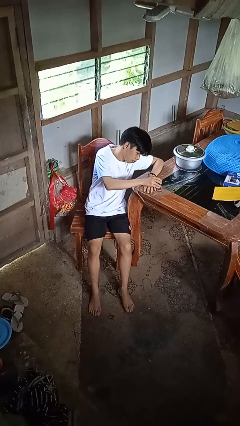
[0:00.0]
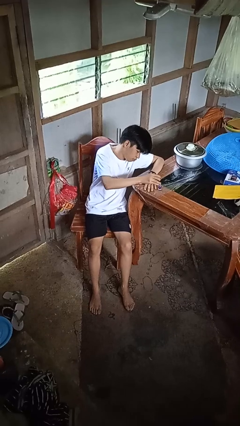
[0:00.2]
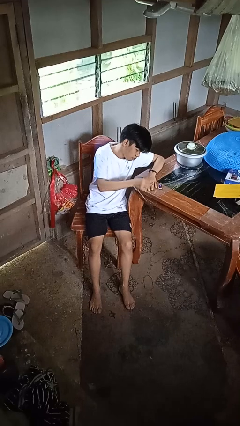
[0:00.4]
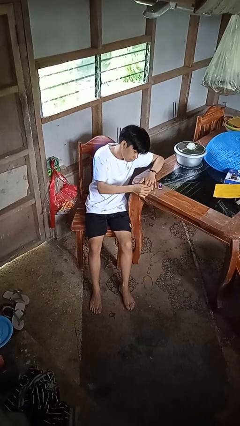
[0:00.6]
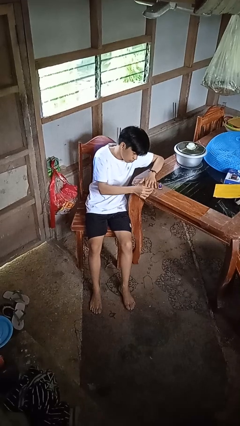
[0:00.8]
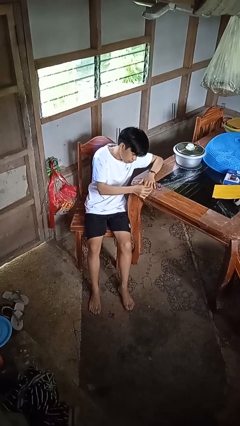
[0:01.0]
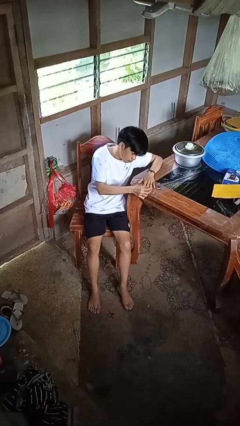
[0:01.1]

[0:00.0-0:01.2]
person paints fingernails

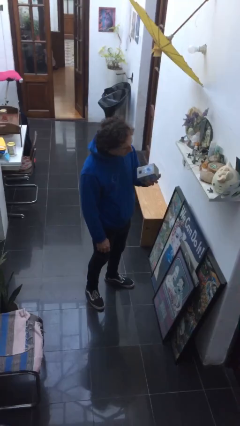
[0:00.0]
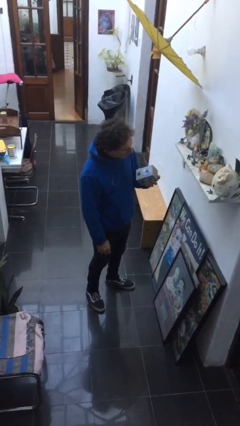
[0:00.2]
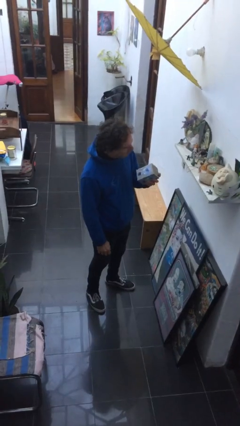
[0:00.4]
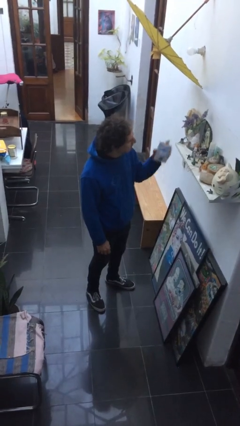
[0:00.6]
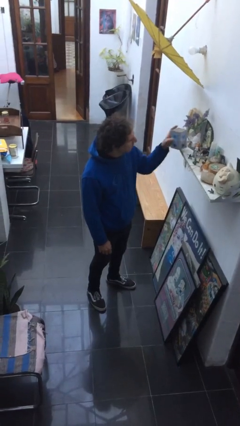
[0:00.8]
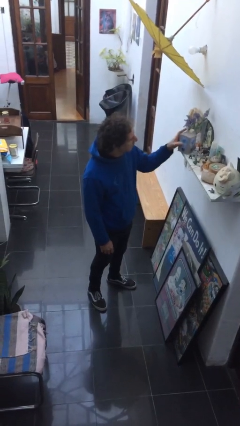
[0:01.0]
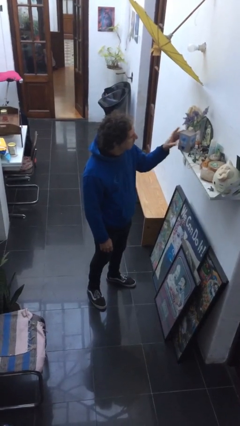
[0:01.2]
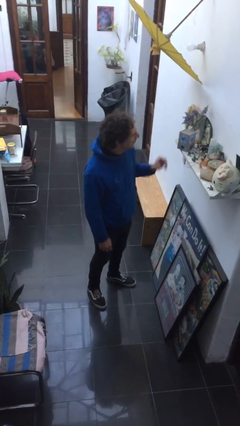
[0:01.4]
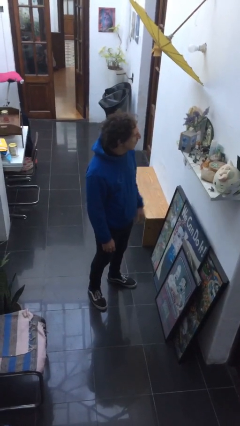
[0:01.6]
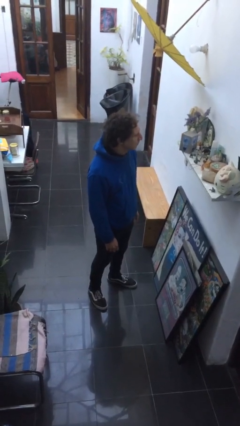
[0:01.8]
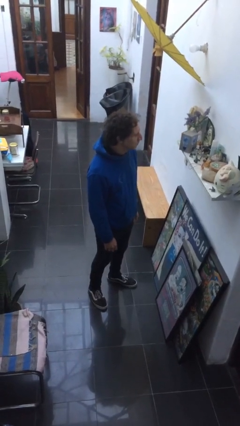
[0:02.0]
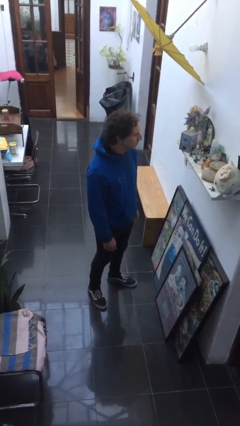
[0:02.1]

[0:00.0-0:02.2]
person puts down object on countertop

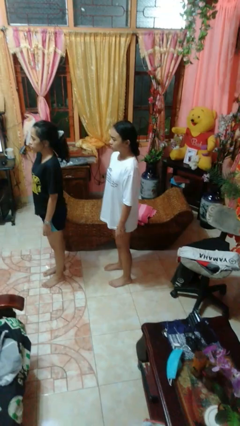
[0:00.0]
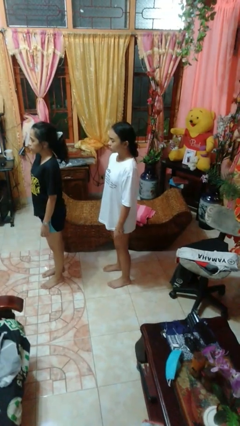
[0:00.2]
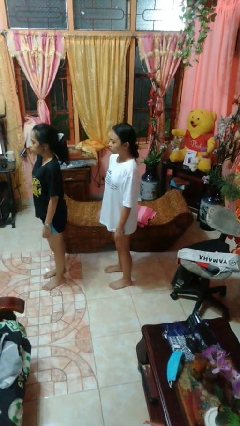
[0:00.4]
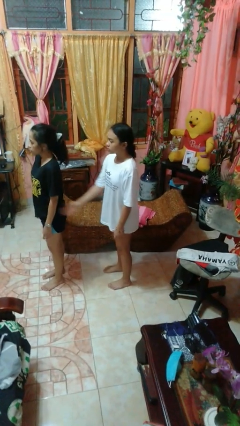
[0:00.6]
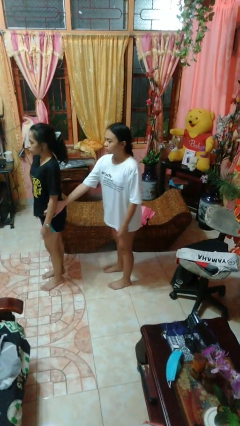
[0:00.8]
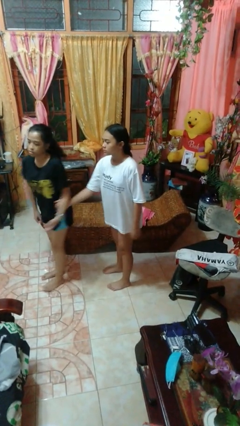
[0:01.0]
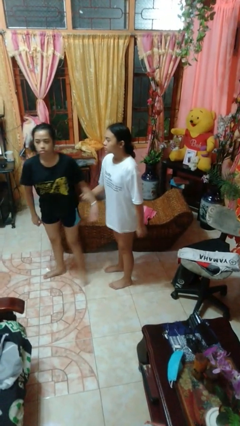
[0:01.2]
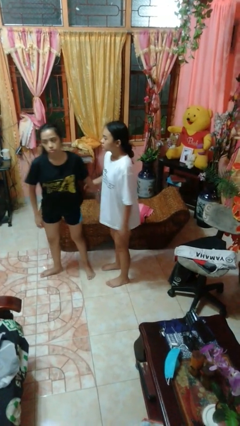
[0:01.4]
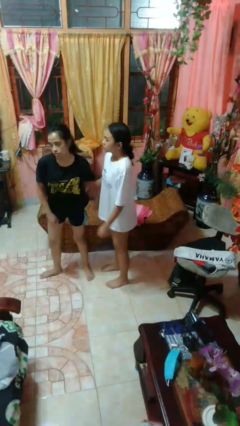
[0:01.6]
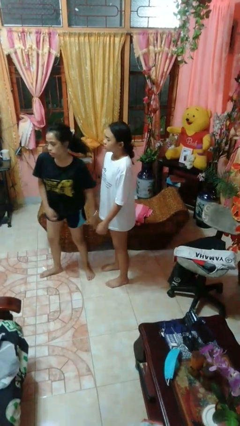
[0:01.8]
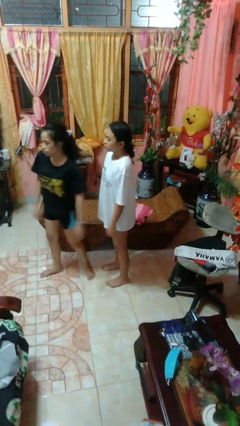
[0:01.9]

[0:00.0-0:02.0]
person grabs person by forearm

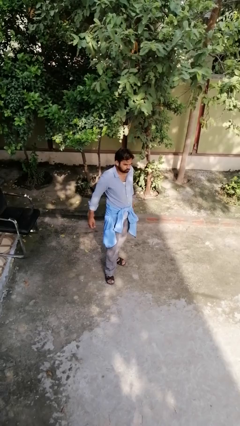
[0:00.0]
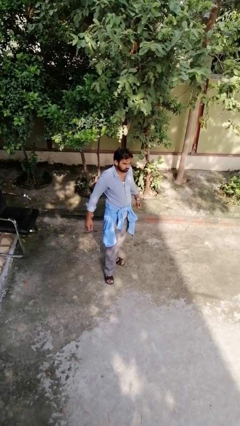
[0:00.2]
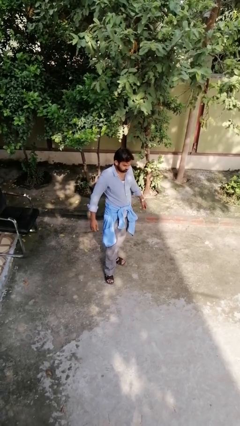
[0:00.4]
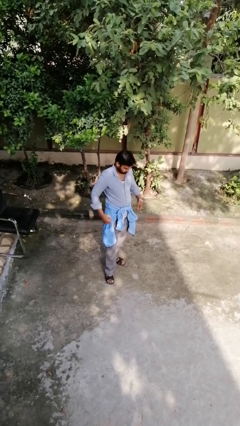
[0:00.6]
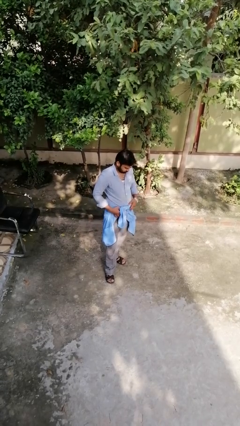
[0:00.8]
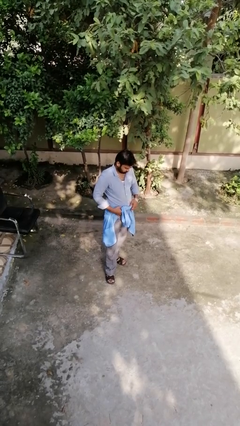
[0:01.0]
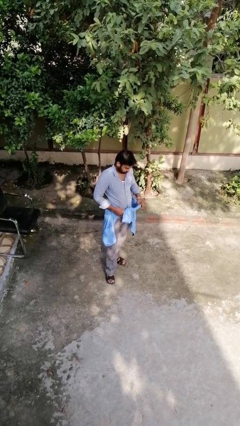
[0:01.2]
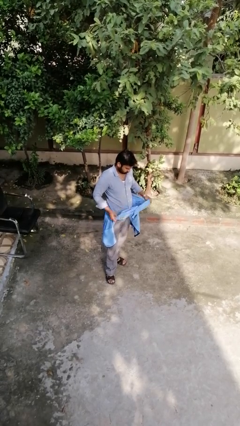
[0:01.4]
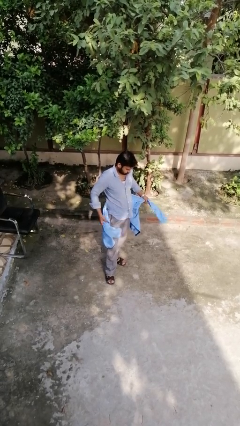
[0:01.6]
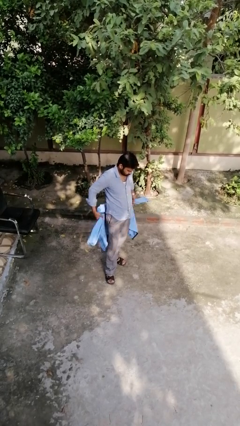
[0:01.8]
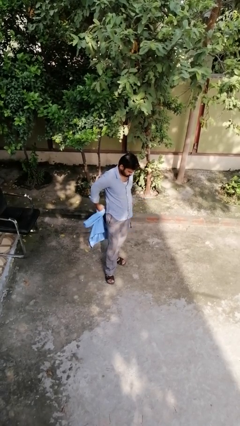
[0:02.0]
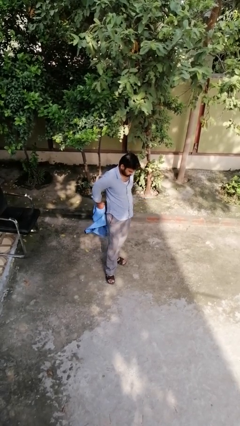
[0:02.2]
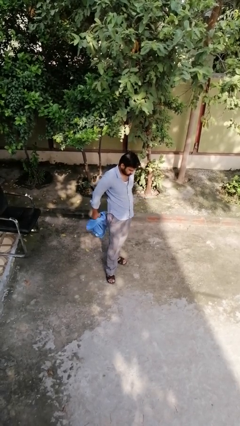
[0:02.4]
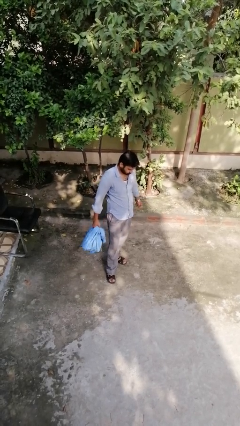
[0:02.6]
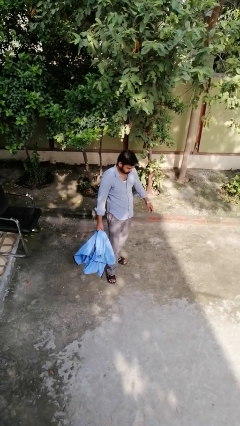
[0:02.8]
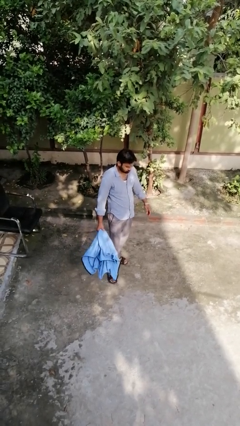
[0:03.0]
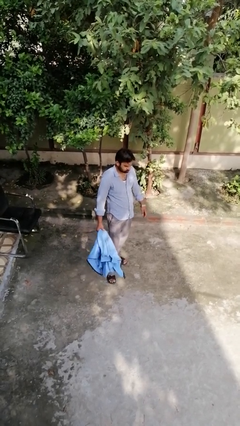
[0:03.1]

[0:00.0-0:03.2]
person unties jacket around waist

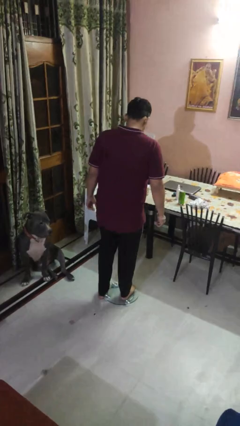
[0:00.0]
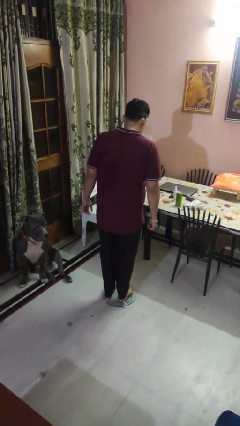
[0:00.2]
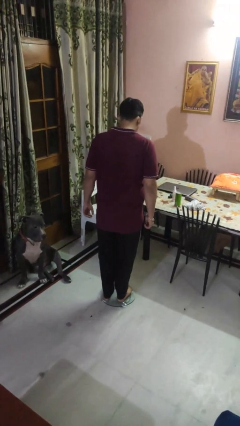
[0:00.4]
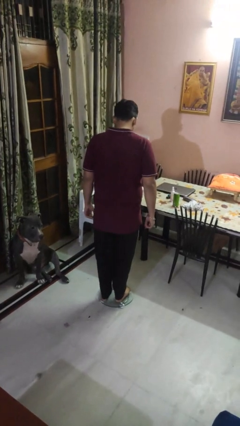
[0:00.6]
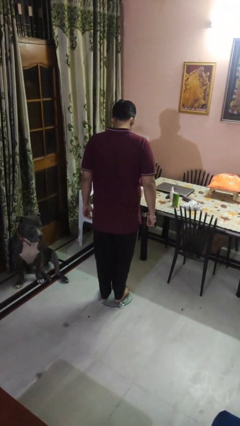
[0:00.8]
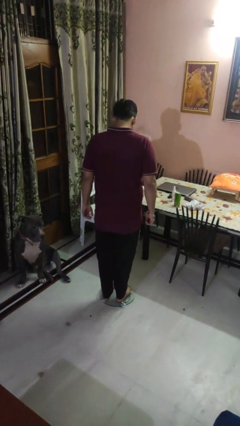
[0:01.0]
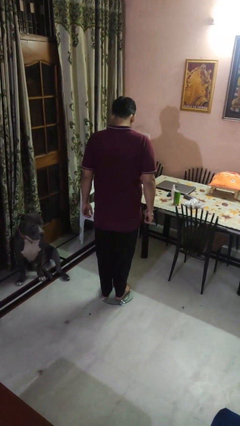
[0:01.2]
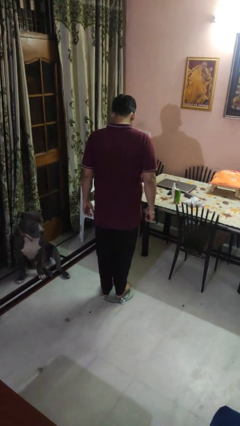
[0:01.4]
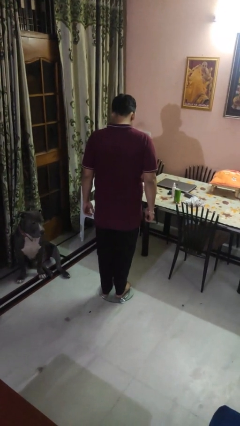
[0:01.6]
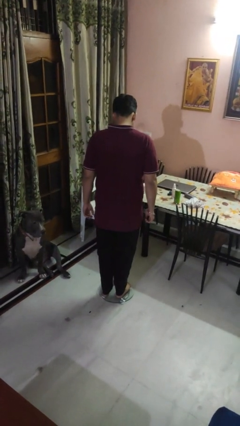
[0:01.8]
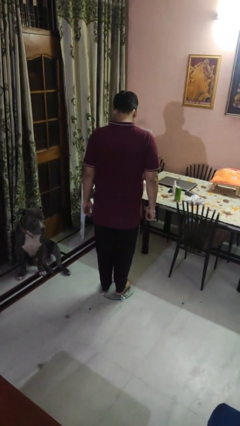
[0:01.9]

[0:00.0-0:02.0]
person uses bodyweight scale

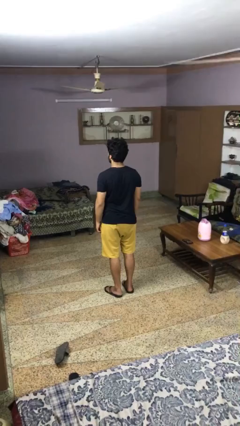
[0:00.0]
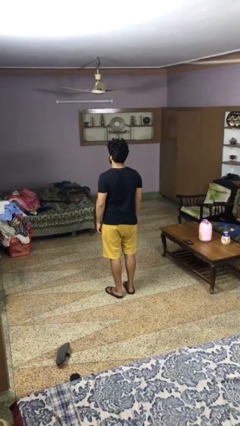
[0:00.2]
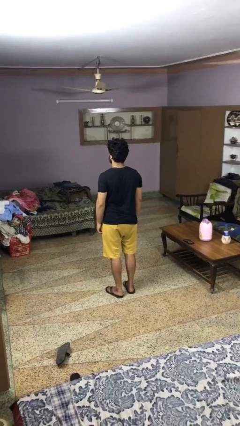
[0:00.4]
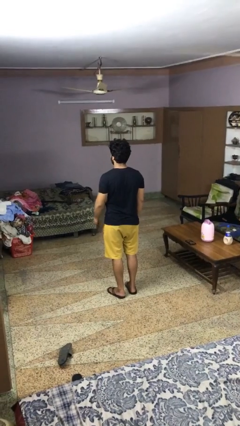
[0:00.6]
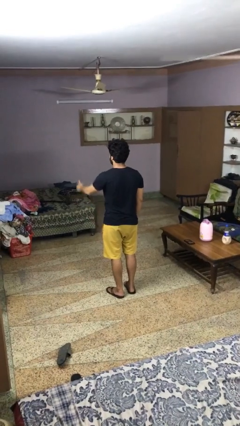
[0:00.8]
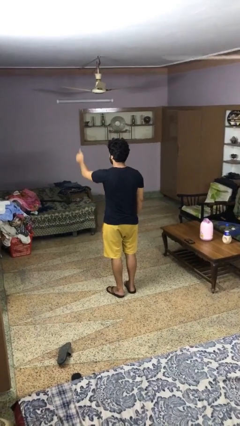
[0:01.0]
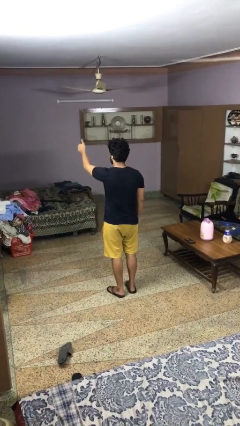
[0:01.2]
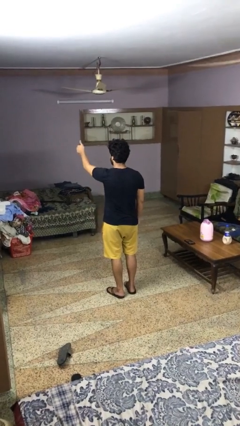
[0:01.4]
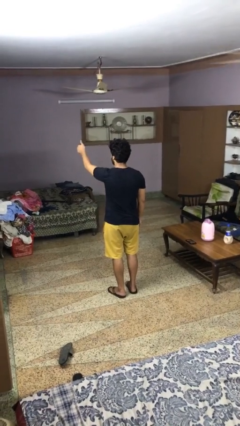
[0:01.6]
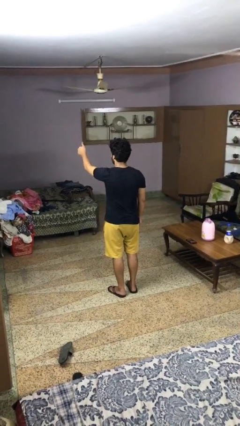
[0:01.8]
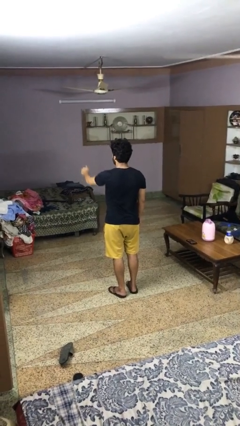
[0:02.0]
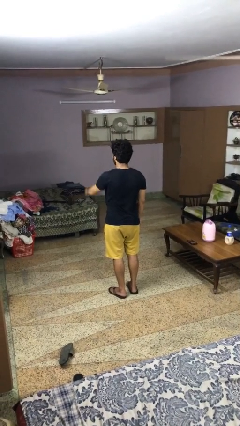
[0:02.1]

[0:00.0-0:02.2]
person gestures thumbs up

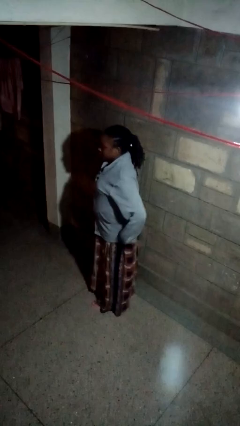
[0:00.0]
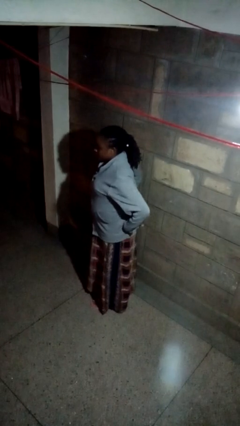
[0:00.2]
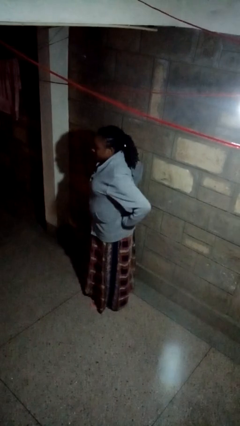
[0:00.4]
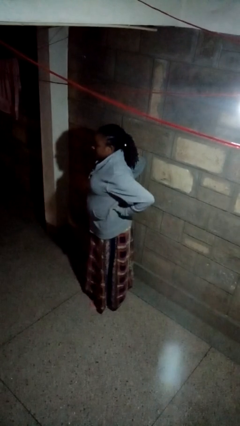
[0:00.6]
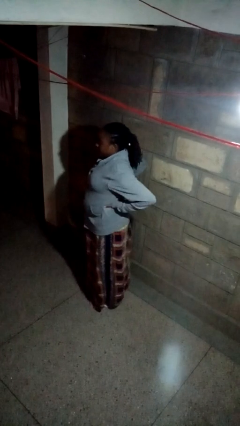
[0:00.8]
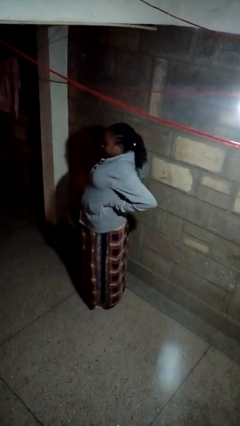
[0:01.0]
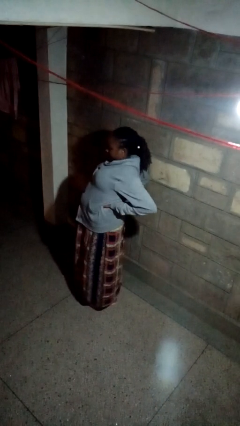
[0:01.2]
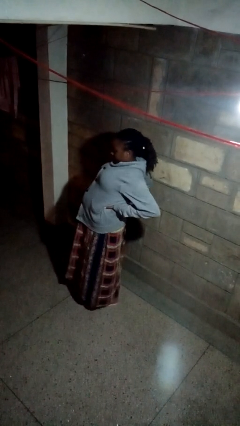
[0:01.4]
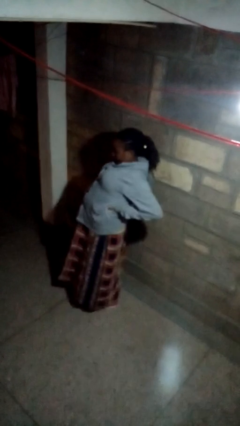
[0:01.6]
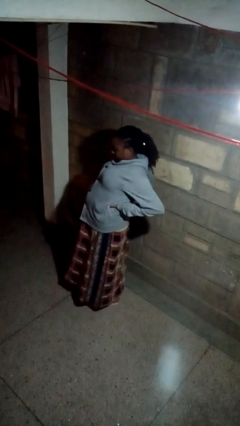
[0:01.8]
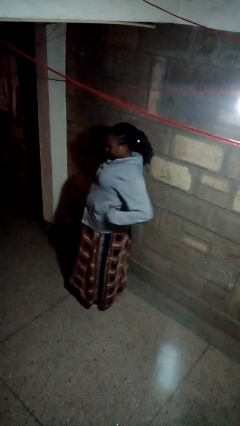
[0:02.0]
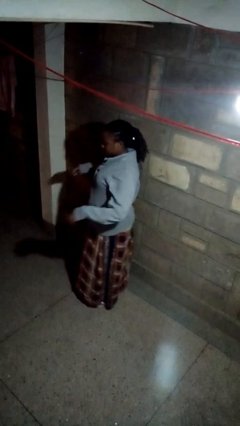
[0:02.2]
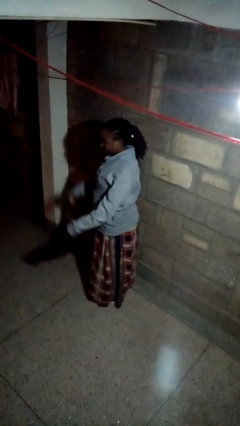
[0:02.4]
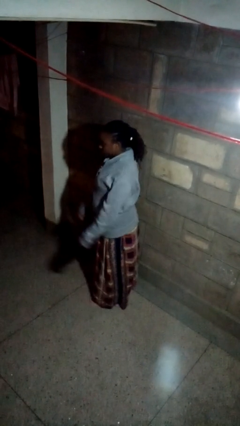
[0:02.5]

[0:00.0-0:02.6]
person stretches back

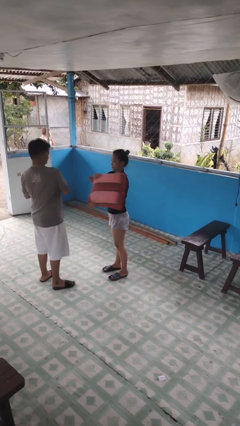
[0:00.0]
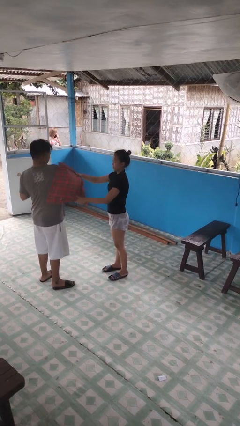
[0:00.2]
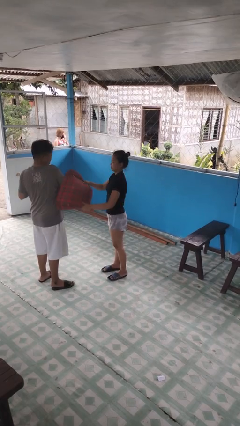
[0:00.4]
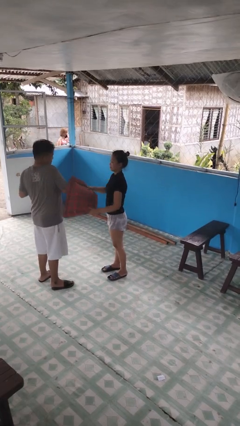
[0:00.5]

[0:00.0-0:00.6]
person hits person with pillow

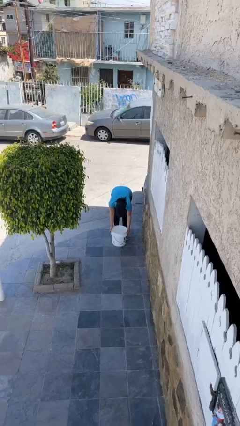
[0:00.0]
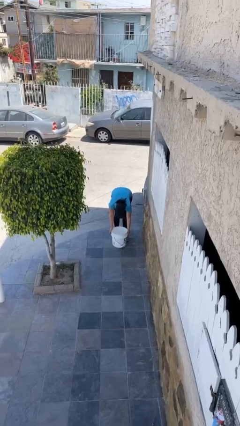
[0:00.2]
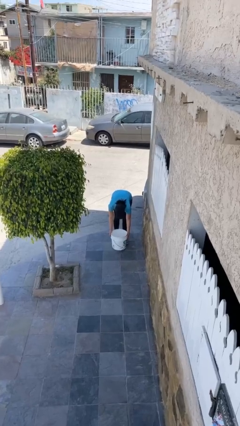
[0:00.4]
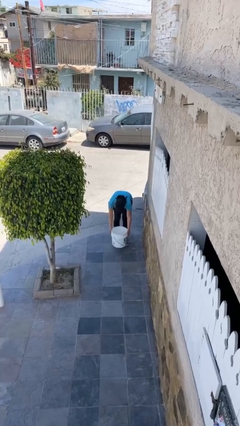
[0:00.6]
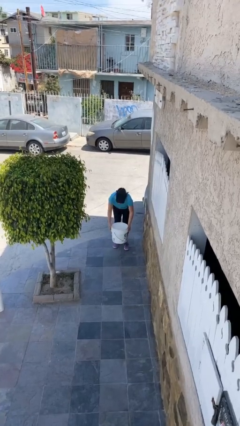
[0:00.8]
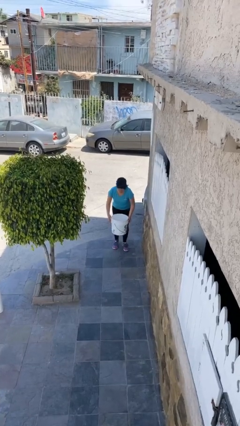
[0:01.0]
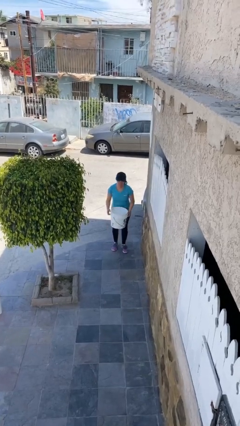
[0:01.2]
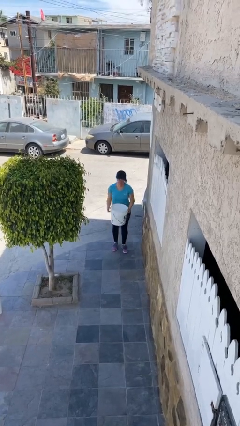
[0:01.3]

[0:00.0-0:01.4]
person picks up object from floor
